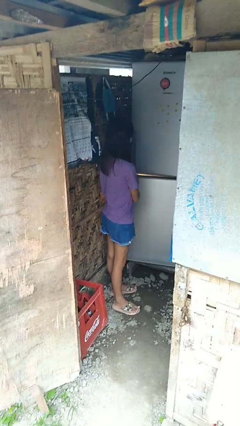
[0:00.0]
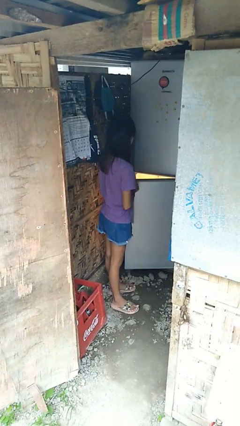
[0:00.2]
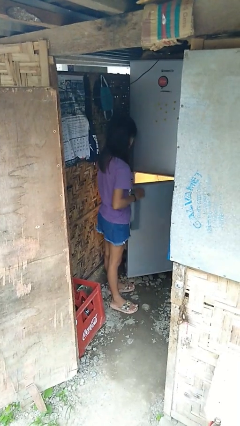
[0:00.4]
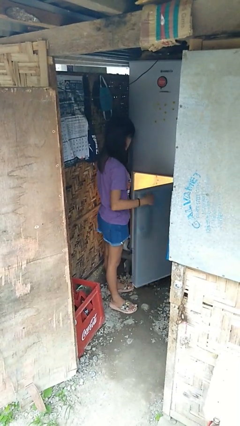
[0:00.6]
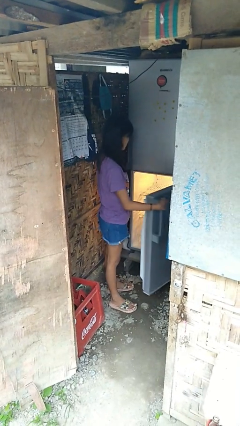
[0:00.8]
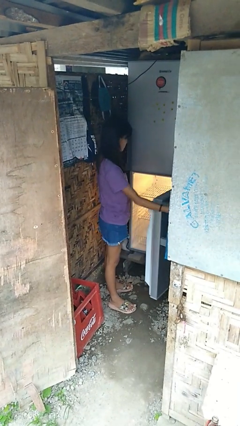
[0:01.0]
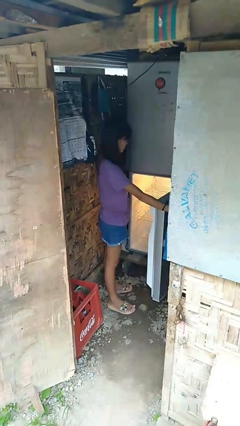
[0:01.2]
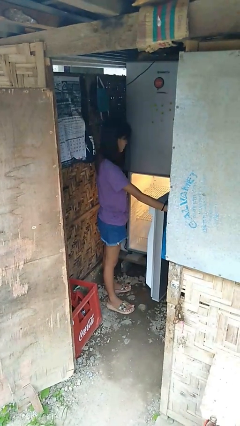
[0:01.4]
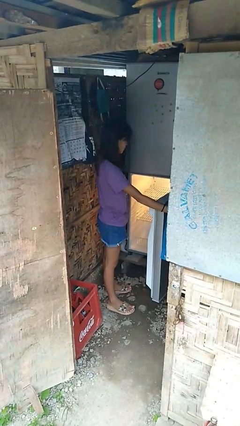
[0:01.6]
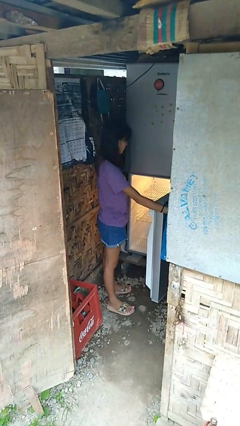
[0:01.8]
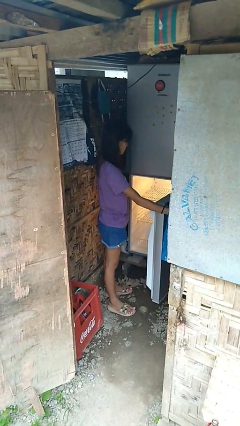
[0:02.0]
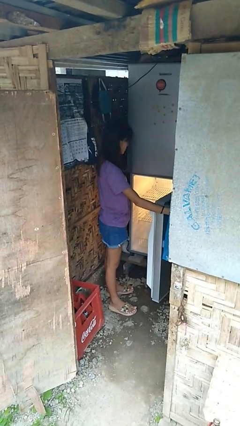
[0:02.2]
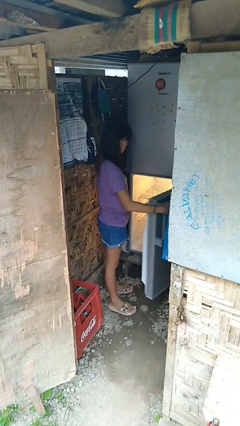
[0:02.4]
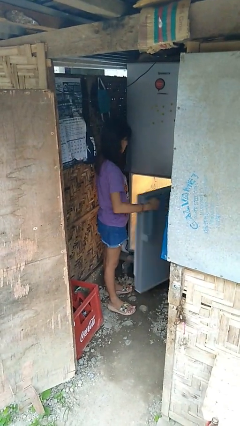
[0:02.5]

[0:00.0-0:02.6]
person opens refrigerator

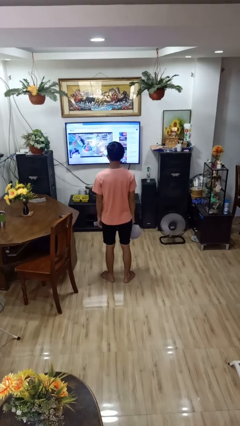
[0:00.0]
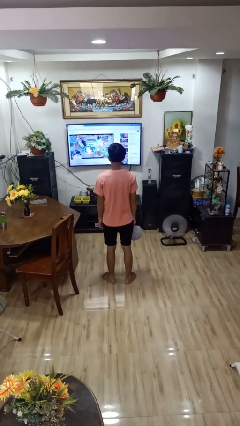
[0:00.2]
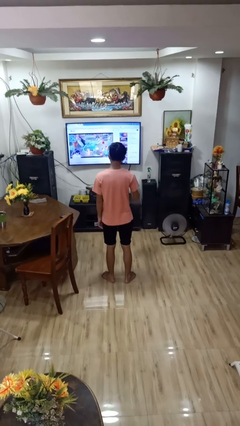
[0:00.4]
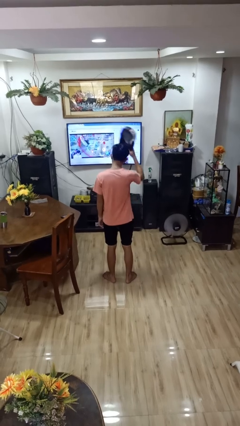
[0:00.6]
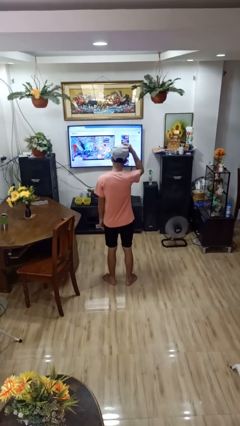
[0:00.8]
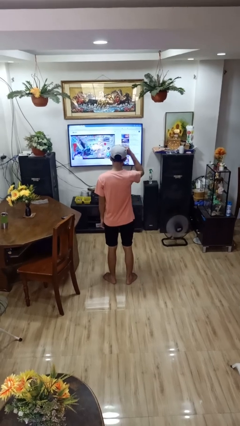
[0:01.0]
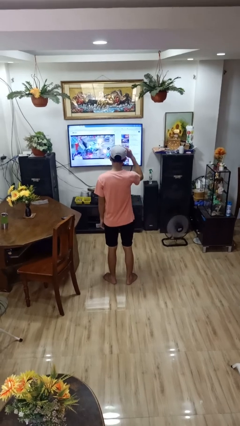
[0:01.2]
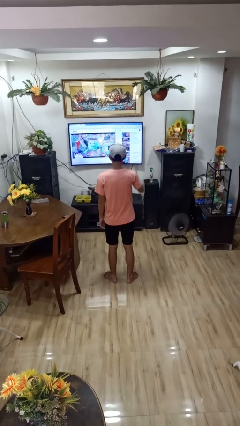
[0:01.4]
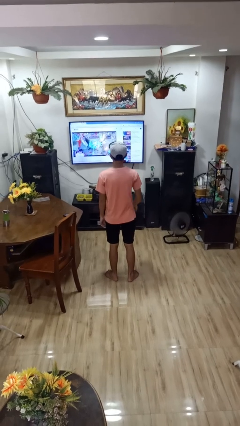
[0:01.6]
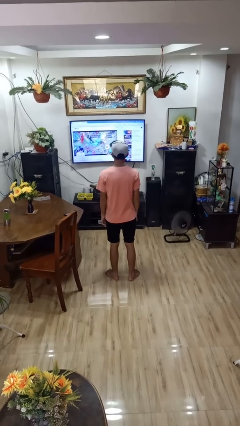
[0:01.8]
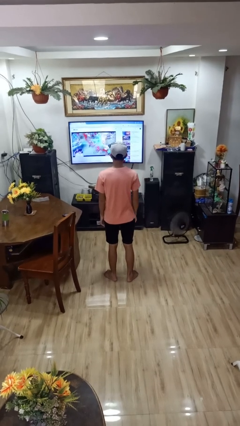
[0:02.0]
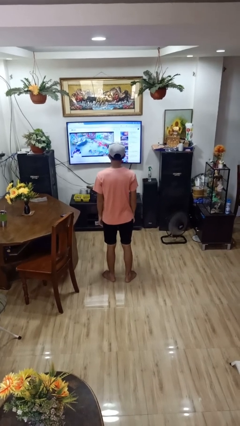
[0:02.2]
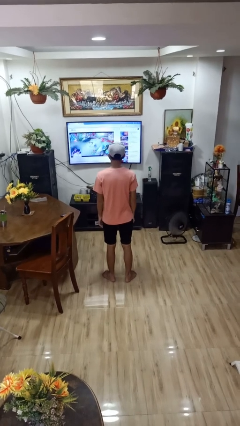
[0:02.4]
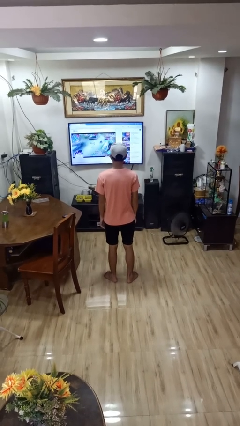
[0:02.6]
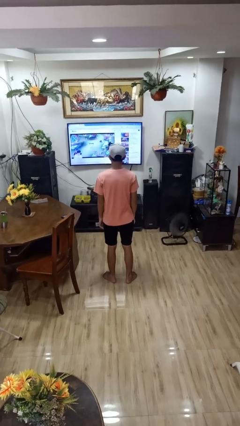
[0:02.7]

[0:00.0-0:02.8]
person puts on hat

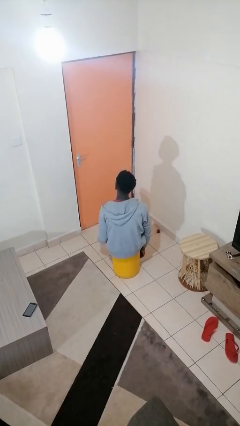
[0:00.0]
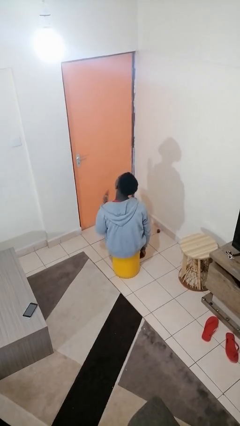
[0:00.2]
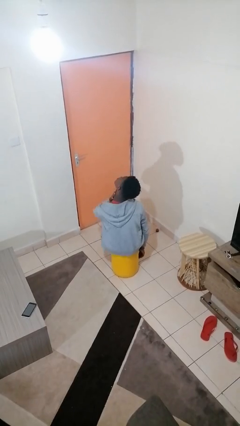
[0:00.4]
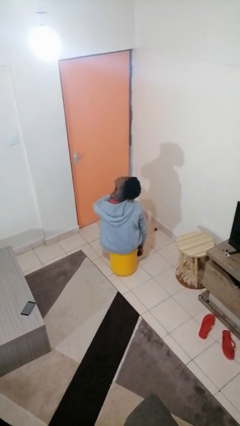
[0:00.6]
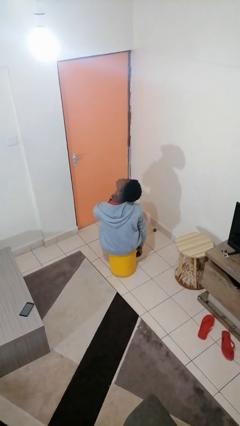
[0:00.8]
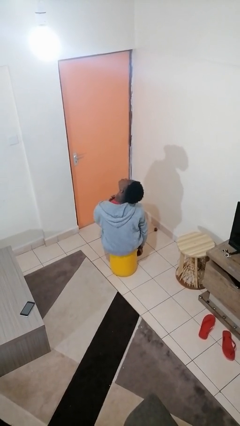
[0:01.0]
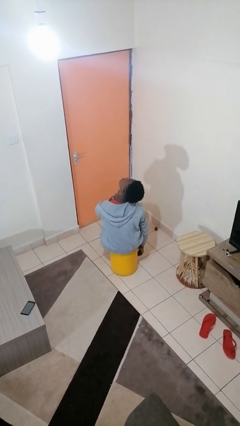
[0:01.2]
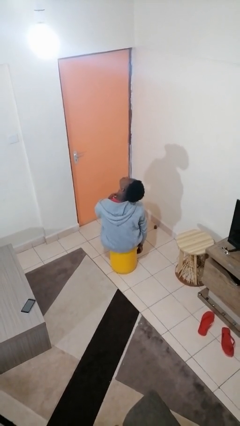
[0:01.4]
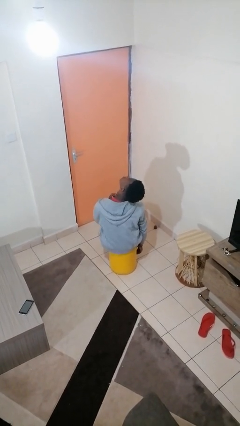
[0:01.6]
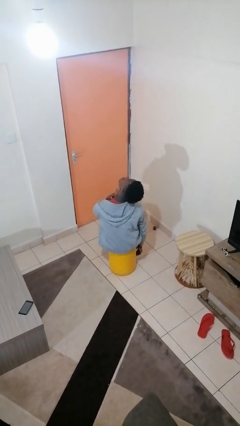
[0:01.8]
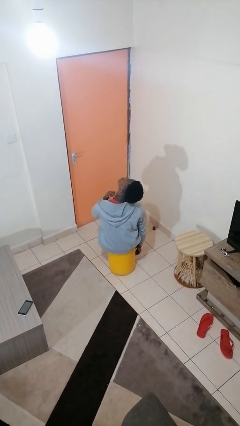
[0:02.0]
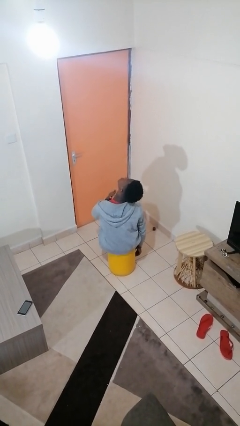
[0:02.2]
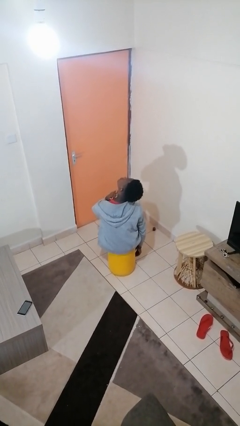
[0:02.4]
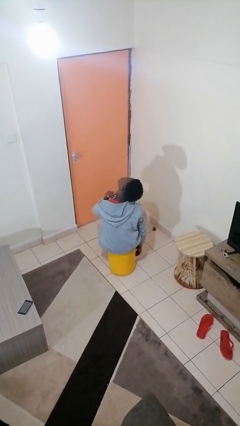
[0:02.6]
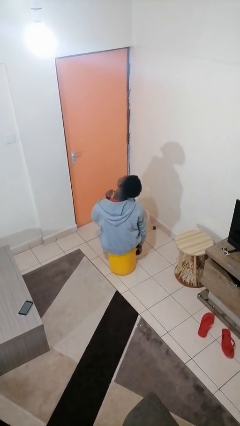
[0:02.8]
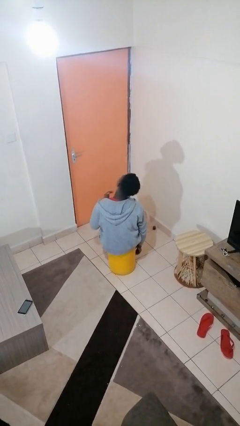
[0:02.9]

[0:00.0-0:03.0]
person rubs neck

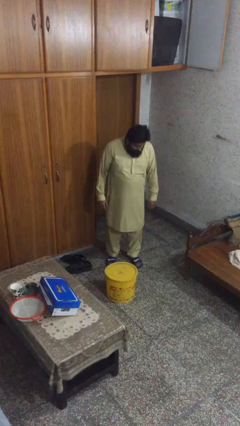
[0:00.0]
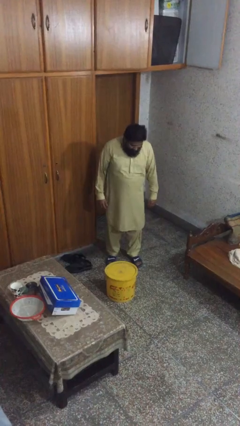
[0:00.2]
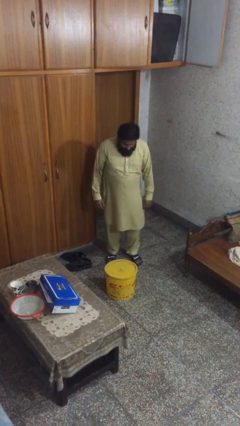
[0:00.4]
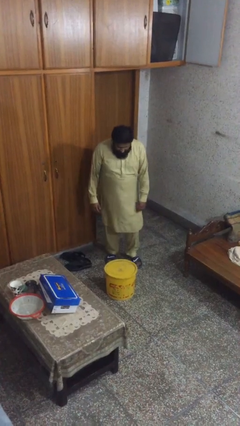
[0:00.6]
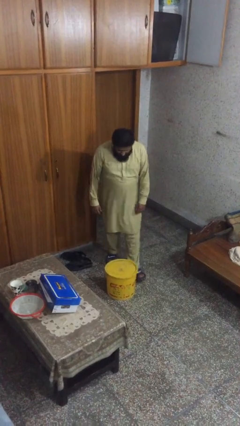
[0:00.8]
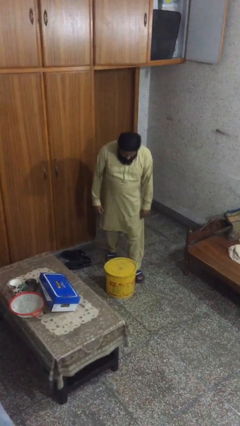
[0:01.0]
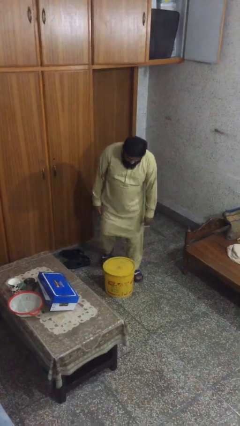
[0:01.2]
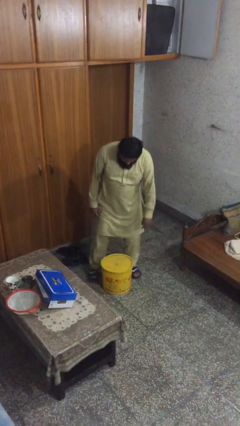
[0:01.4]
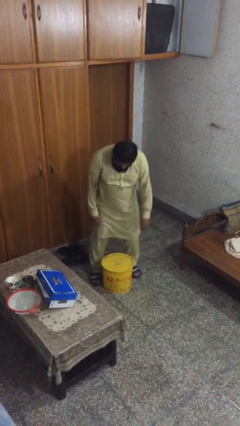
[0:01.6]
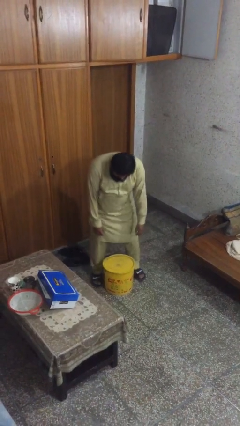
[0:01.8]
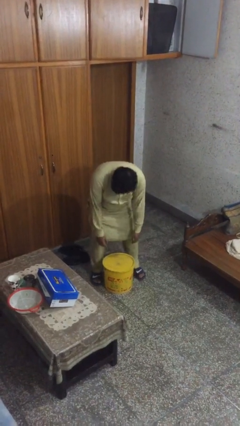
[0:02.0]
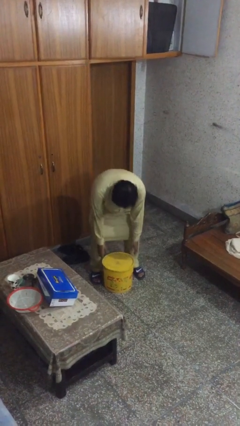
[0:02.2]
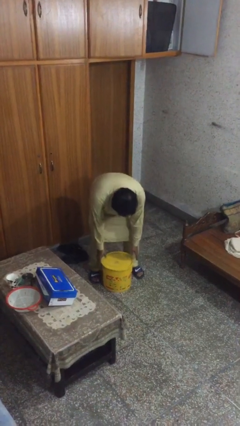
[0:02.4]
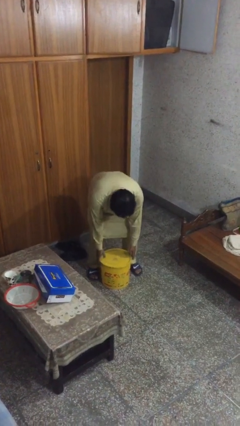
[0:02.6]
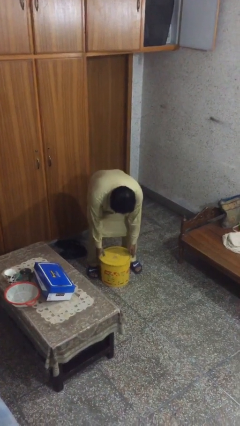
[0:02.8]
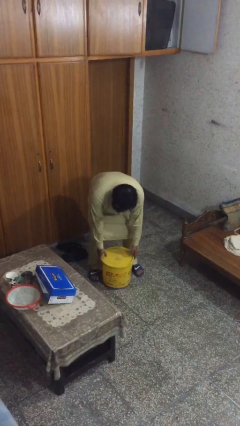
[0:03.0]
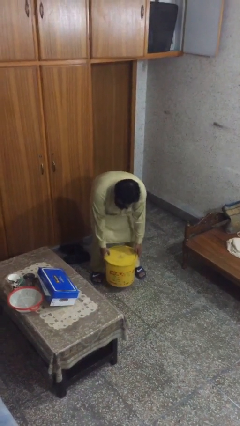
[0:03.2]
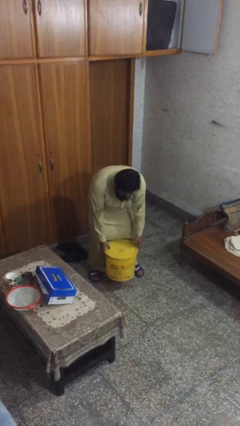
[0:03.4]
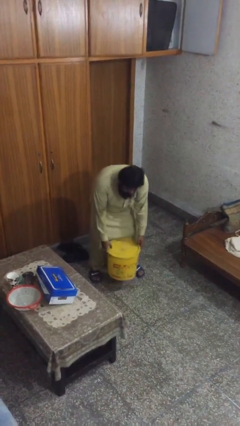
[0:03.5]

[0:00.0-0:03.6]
person picks up object from floor

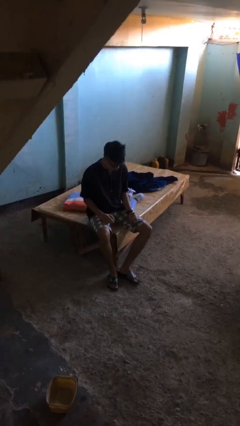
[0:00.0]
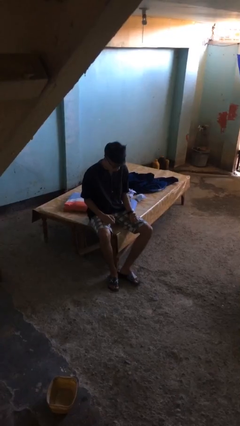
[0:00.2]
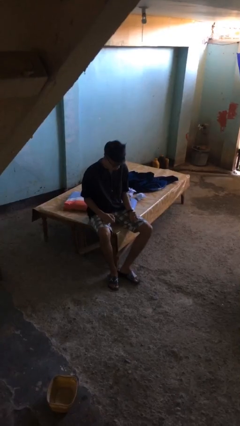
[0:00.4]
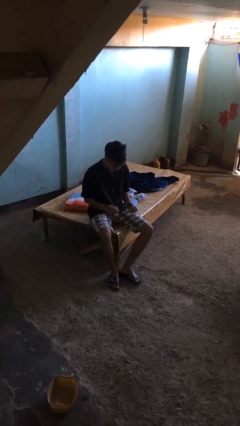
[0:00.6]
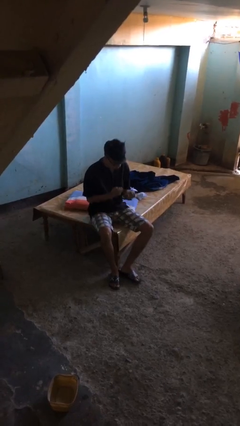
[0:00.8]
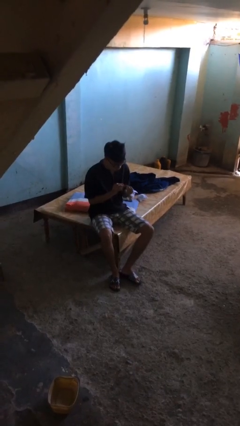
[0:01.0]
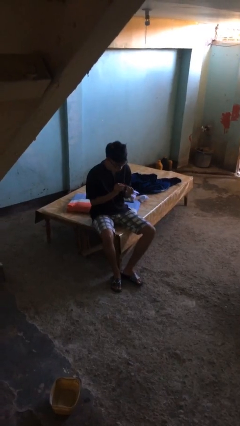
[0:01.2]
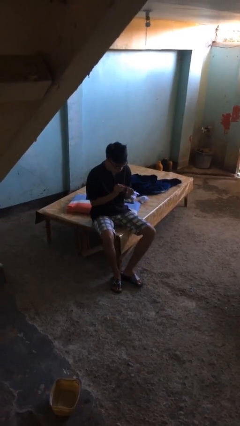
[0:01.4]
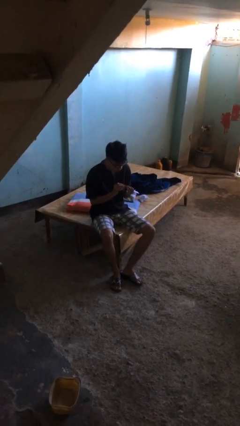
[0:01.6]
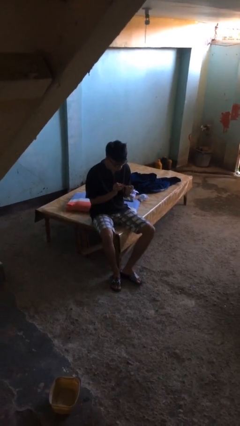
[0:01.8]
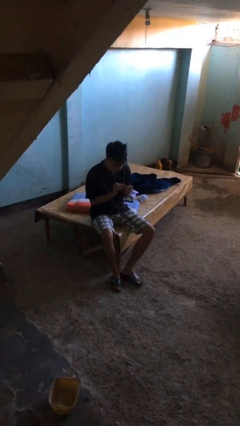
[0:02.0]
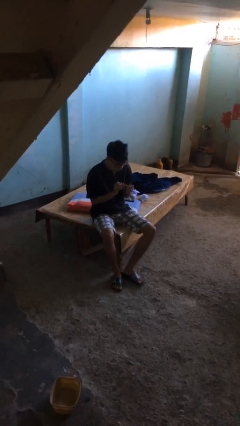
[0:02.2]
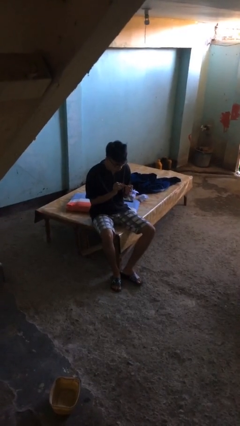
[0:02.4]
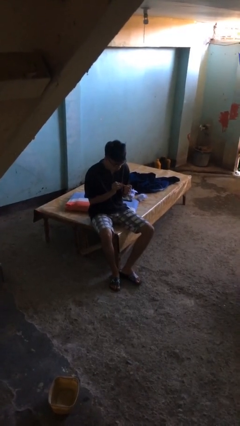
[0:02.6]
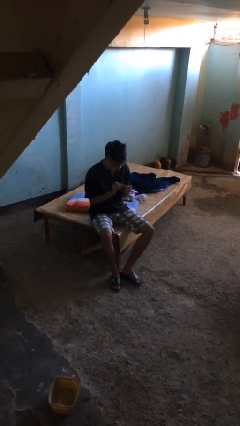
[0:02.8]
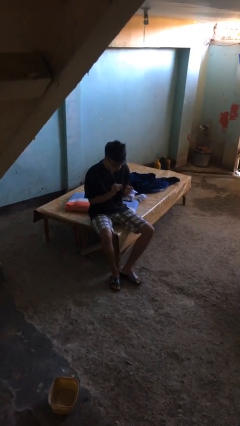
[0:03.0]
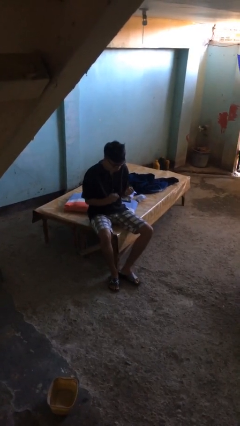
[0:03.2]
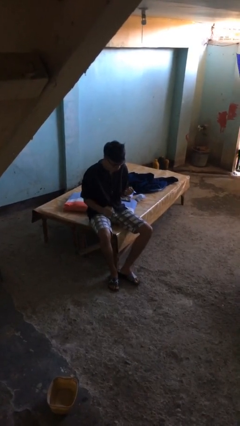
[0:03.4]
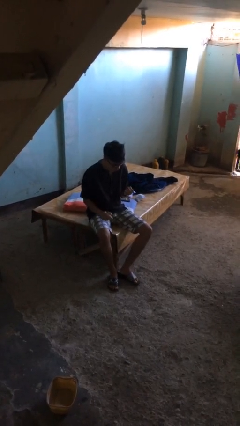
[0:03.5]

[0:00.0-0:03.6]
person clips fingernails

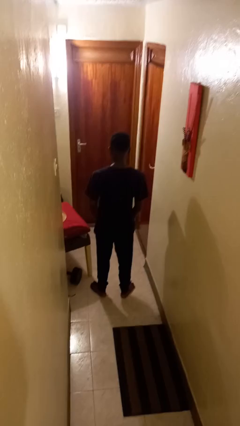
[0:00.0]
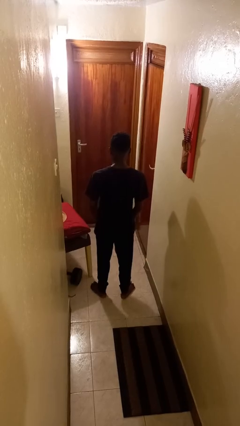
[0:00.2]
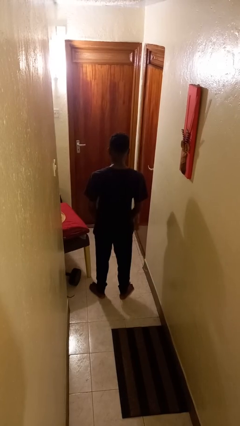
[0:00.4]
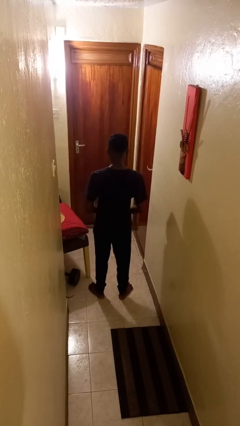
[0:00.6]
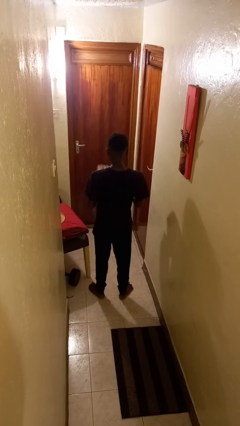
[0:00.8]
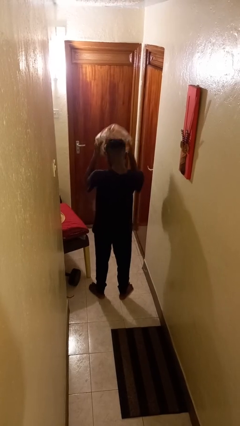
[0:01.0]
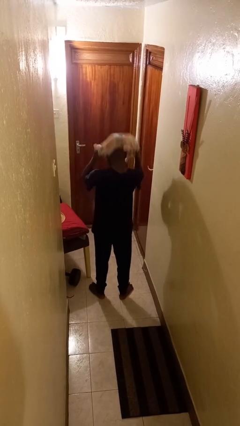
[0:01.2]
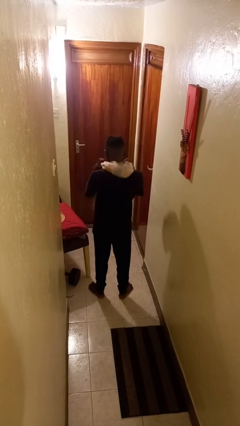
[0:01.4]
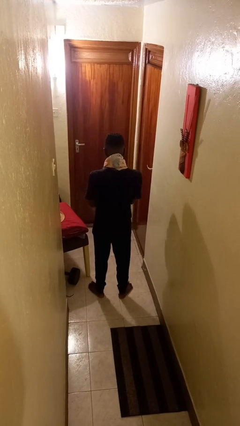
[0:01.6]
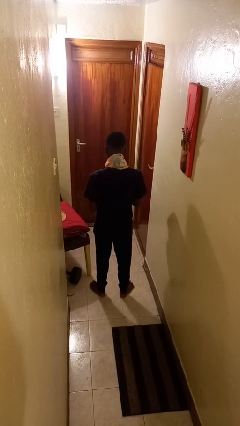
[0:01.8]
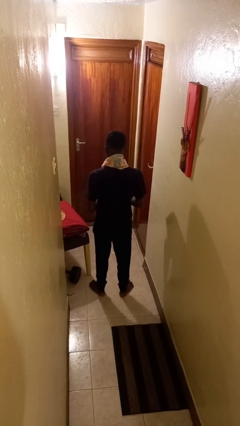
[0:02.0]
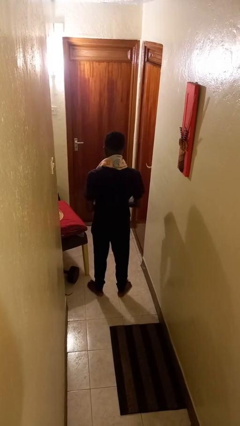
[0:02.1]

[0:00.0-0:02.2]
person puts on scarf
